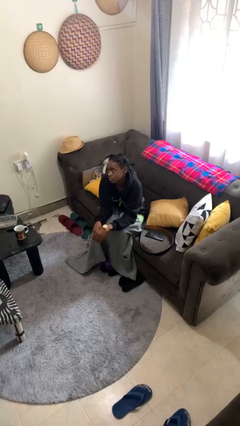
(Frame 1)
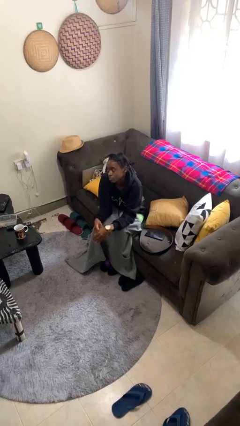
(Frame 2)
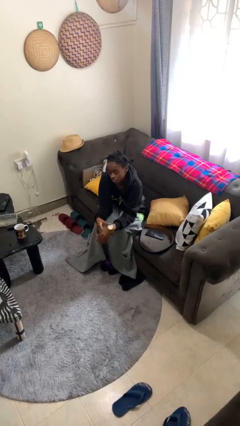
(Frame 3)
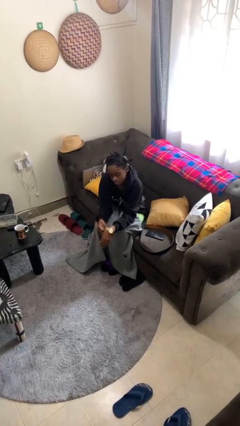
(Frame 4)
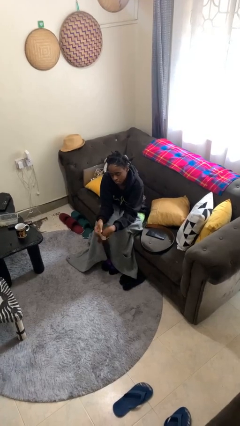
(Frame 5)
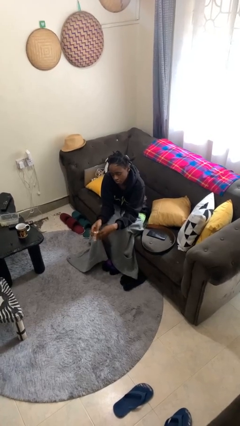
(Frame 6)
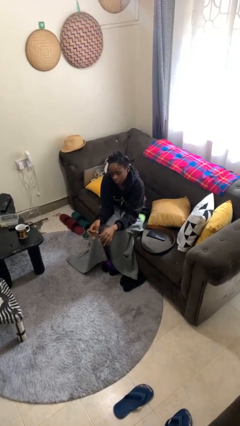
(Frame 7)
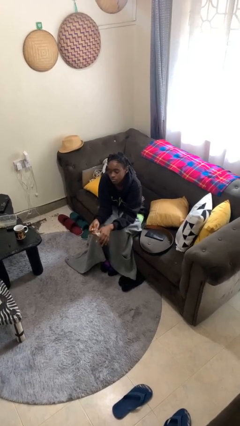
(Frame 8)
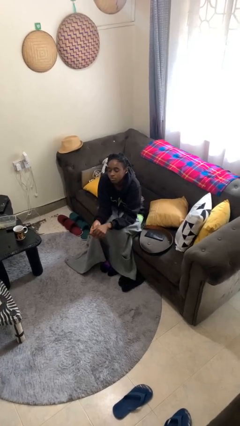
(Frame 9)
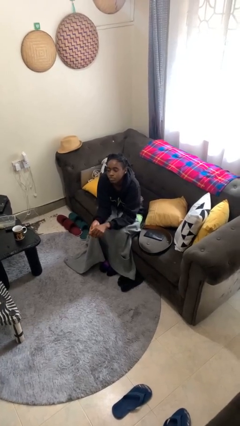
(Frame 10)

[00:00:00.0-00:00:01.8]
person takes off wristwatch

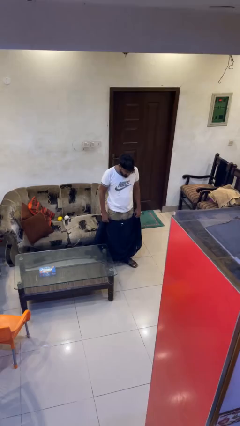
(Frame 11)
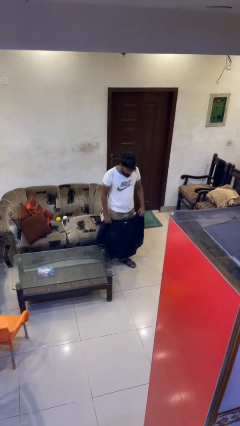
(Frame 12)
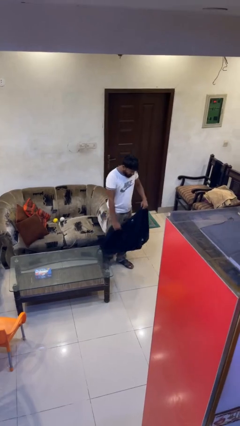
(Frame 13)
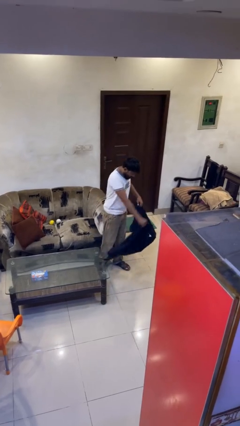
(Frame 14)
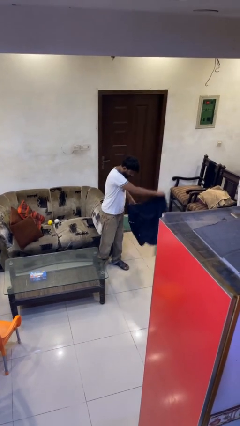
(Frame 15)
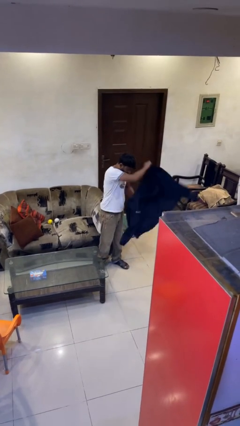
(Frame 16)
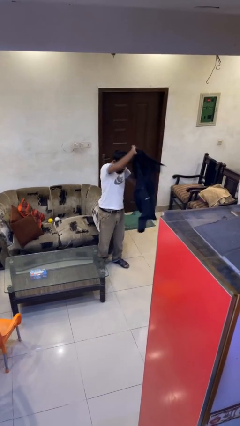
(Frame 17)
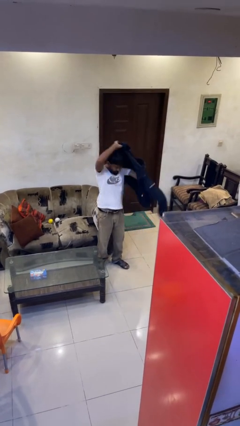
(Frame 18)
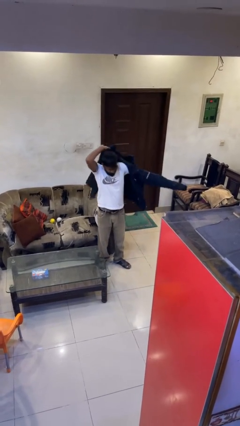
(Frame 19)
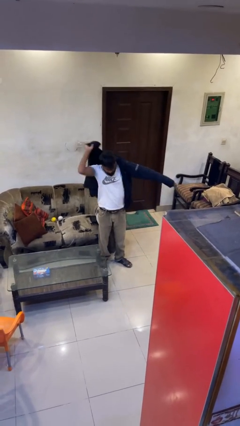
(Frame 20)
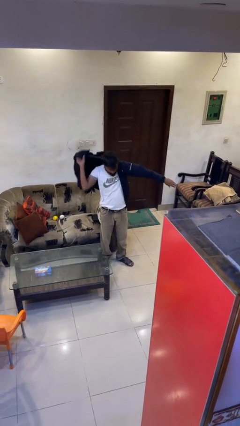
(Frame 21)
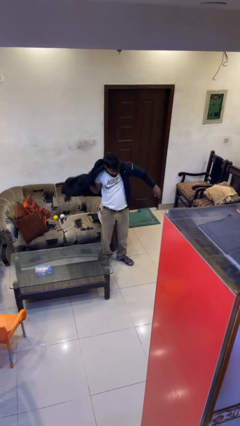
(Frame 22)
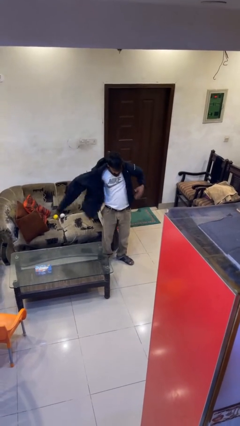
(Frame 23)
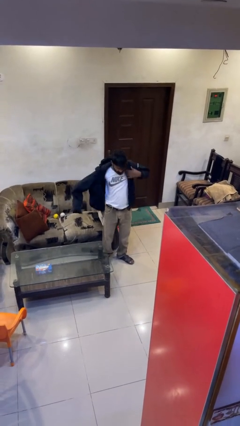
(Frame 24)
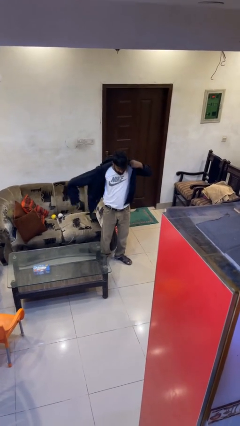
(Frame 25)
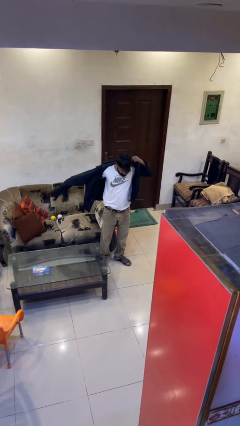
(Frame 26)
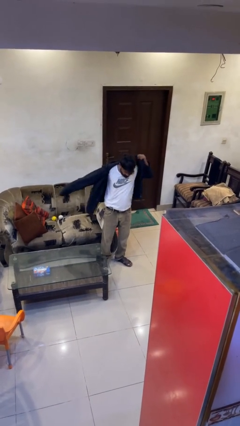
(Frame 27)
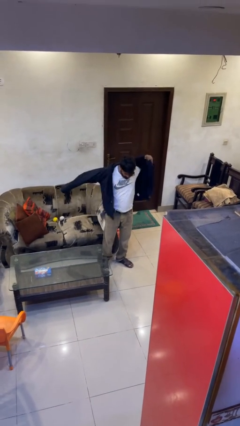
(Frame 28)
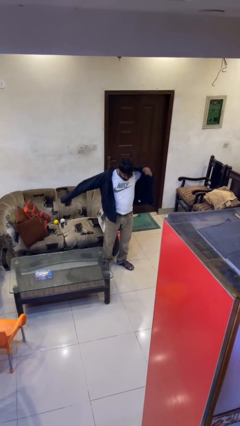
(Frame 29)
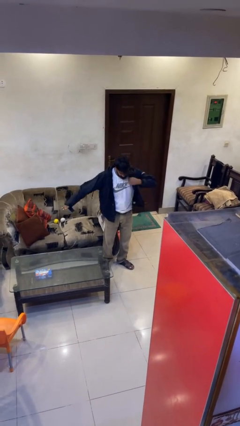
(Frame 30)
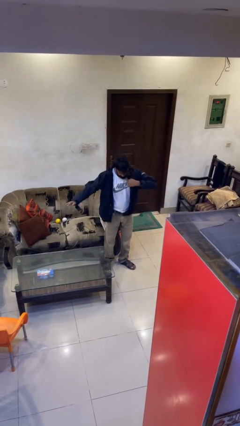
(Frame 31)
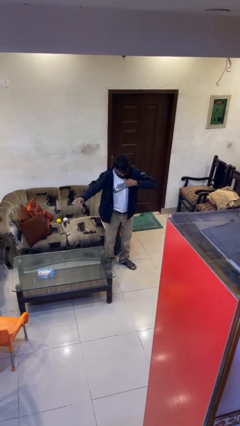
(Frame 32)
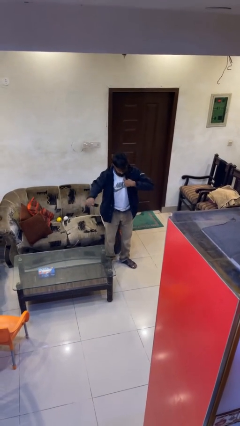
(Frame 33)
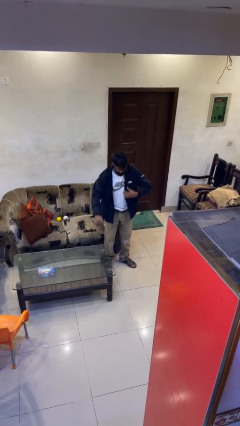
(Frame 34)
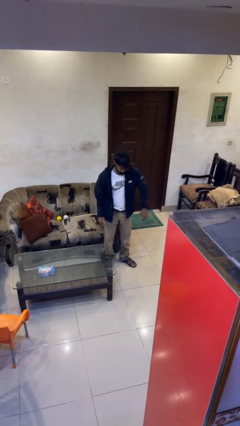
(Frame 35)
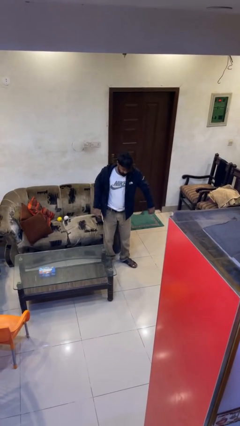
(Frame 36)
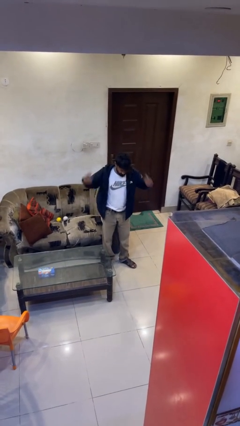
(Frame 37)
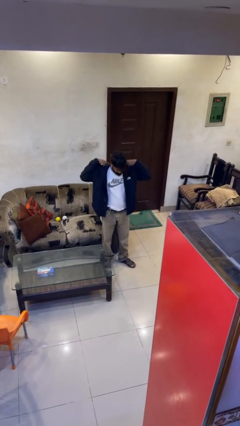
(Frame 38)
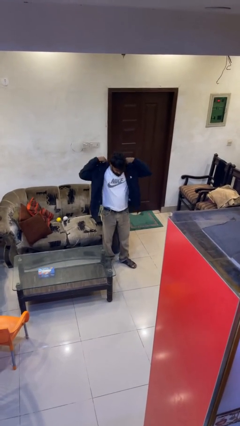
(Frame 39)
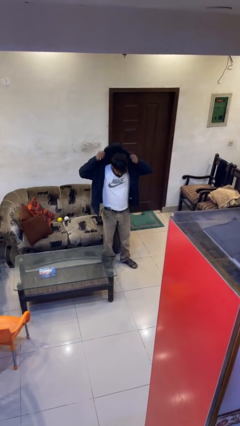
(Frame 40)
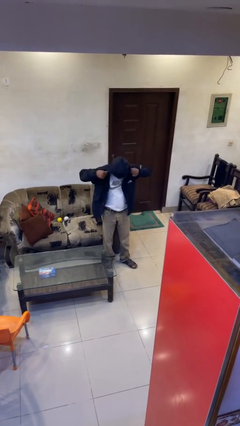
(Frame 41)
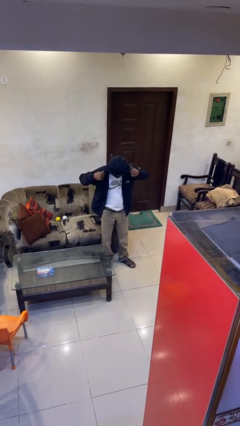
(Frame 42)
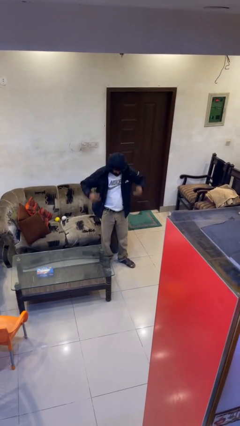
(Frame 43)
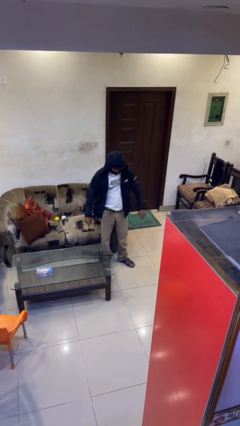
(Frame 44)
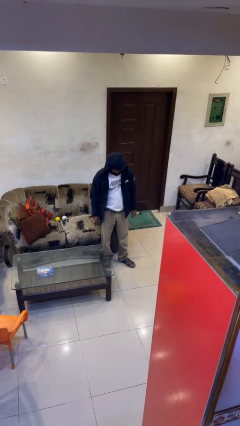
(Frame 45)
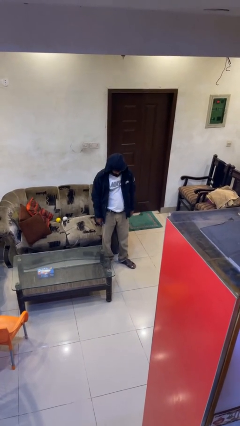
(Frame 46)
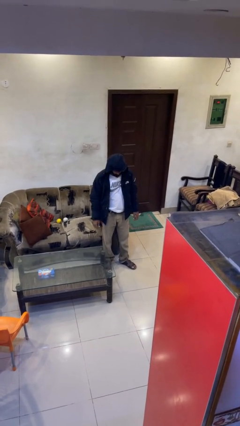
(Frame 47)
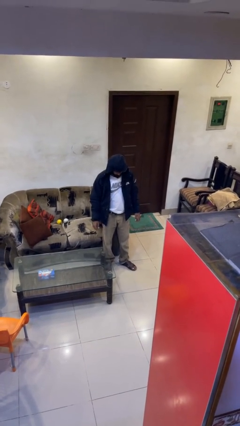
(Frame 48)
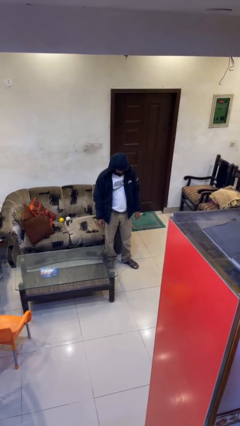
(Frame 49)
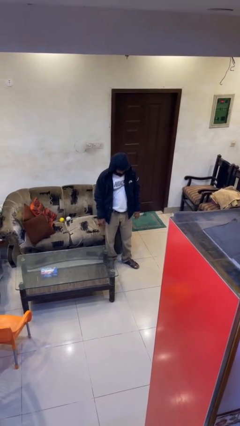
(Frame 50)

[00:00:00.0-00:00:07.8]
person puts on hoodie

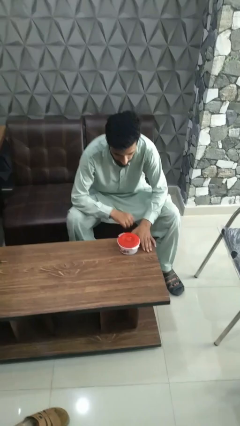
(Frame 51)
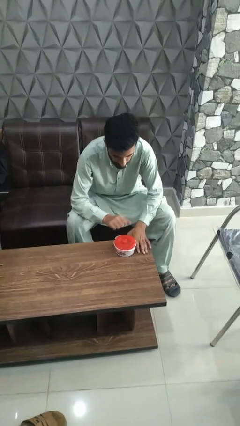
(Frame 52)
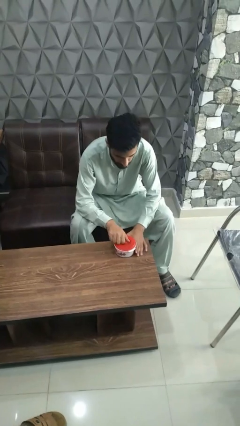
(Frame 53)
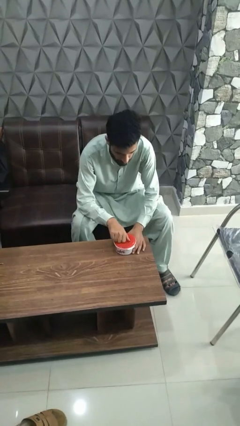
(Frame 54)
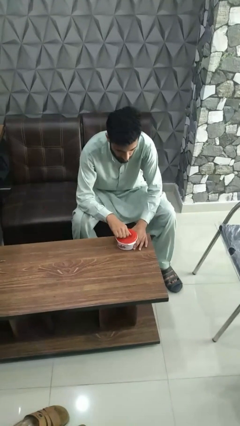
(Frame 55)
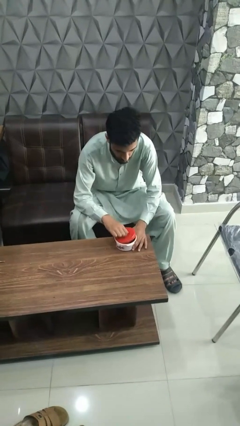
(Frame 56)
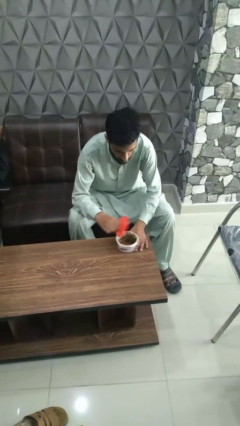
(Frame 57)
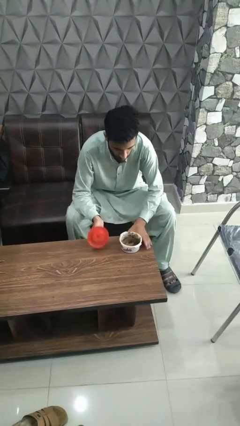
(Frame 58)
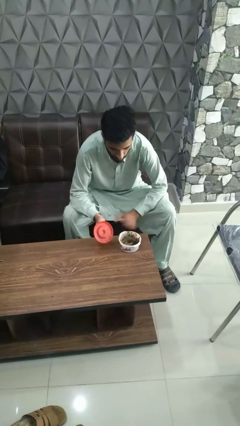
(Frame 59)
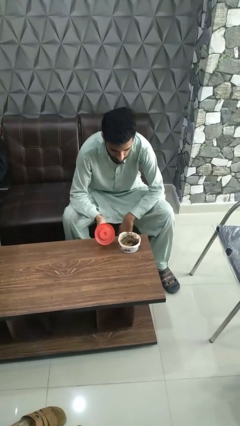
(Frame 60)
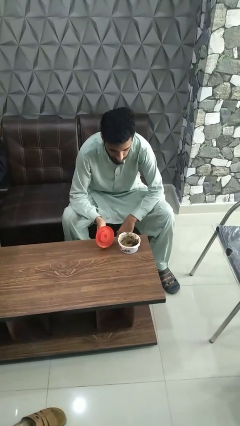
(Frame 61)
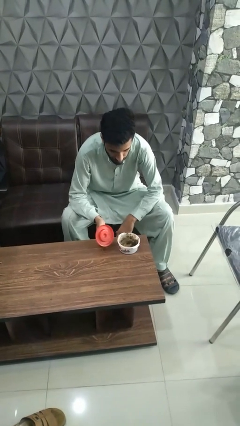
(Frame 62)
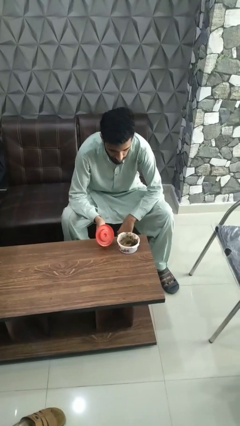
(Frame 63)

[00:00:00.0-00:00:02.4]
person opens jar

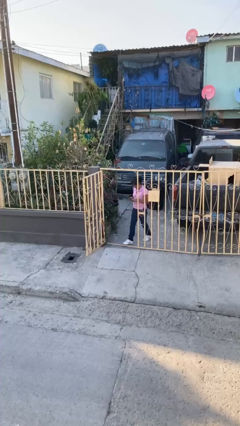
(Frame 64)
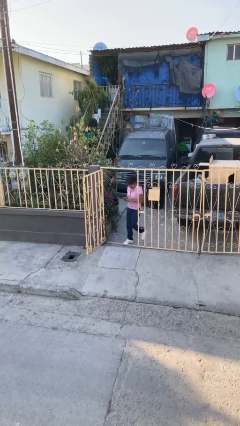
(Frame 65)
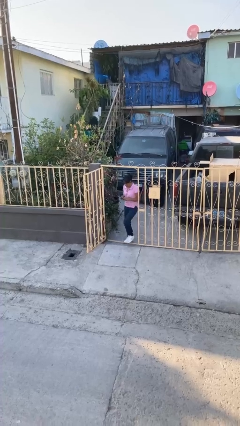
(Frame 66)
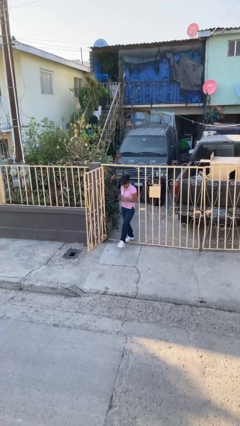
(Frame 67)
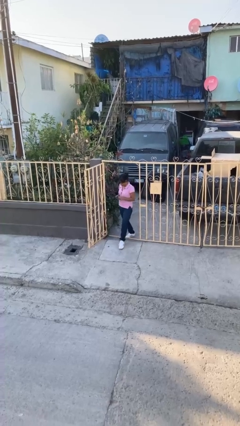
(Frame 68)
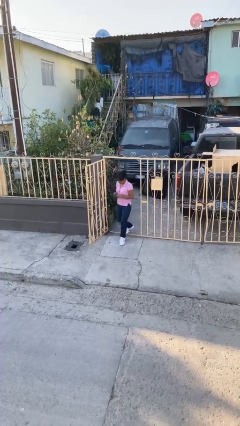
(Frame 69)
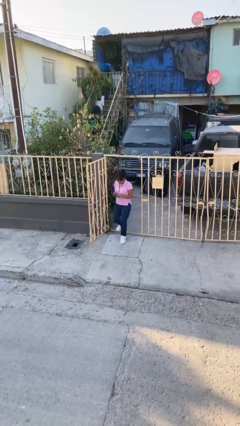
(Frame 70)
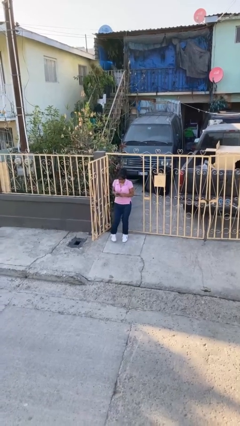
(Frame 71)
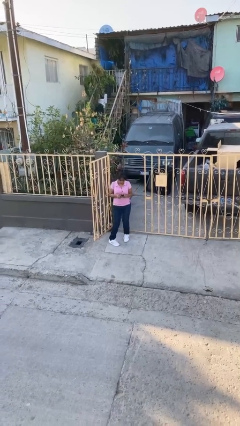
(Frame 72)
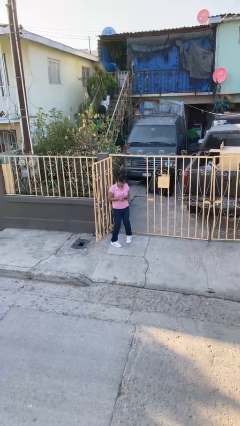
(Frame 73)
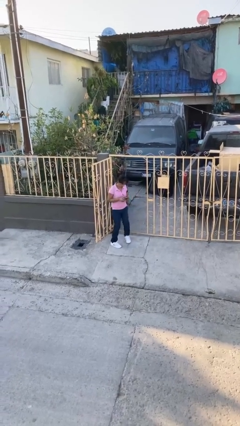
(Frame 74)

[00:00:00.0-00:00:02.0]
person enters scene through structure

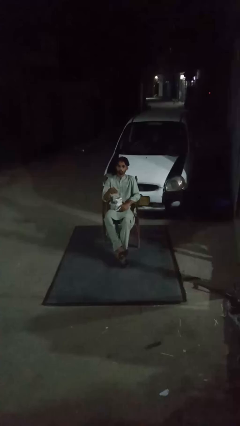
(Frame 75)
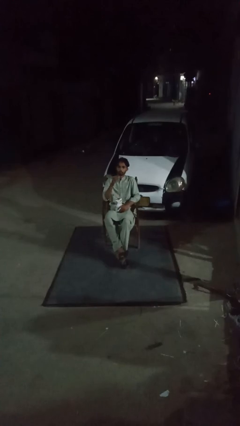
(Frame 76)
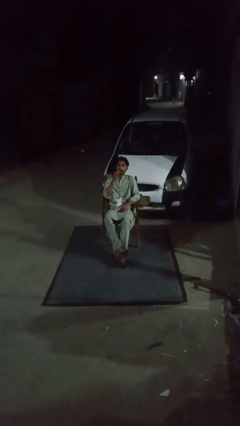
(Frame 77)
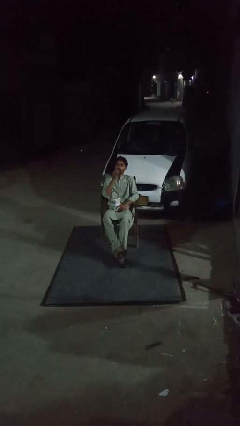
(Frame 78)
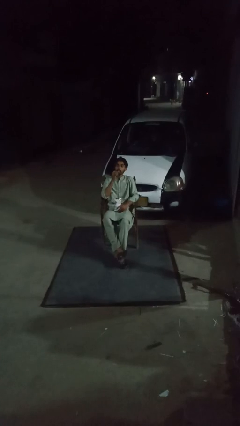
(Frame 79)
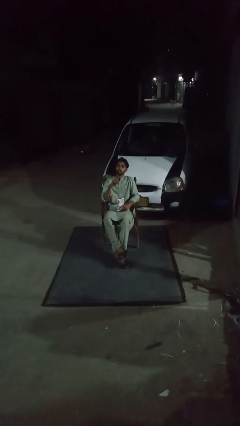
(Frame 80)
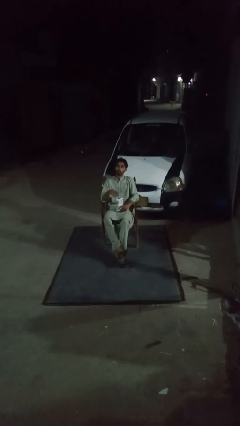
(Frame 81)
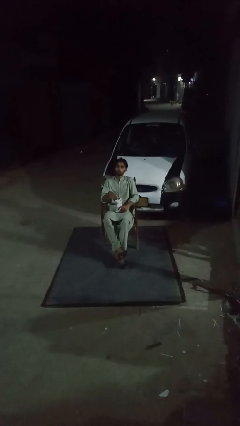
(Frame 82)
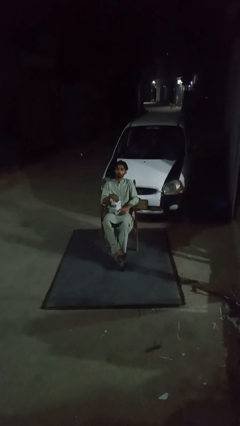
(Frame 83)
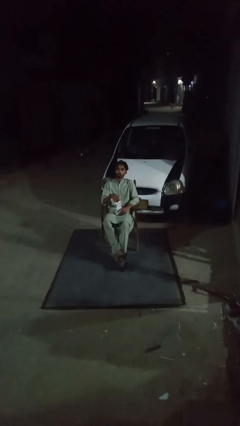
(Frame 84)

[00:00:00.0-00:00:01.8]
person eats snack from bag

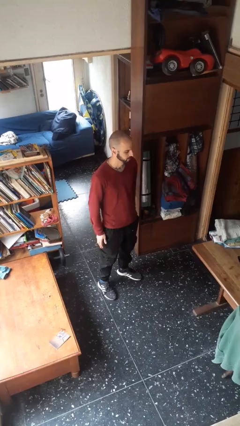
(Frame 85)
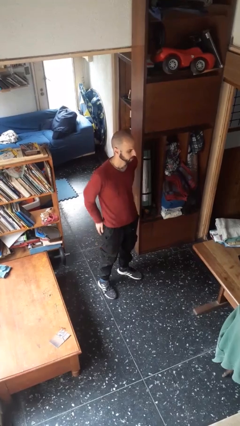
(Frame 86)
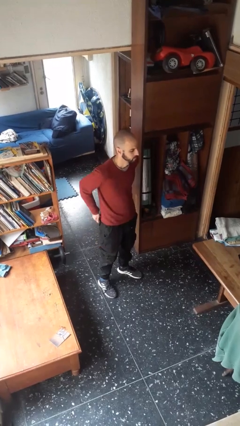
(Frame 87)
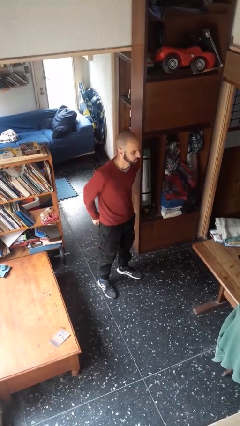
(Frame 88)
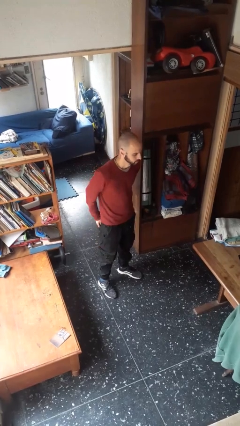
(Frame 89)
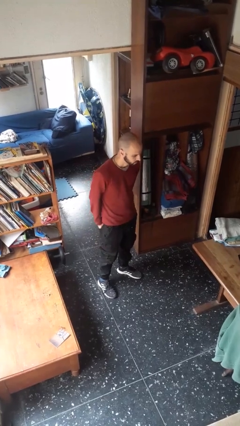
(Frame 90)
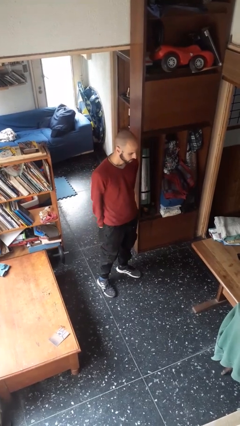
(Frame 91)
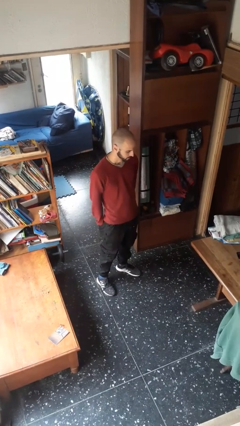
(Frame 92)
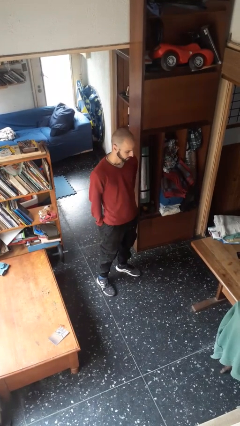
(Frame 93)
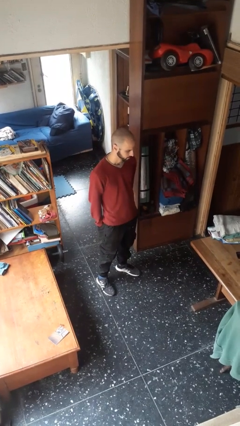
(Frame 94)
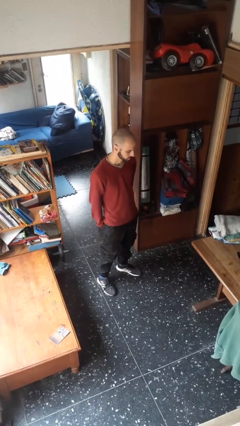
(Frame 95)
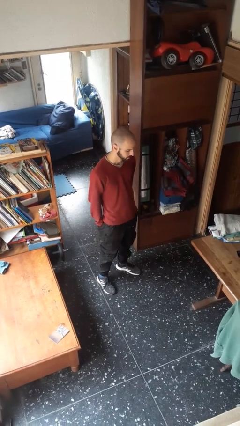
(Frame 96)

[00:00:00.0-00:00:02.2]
person puts hands in back pockets
